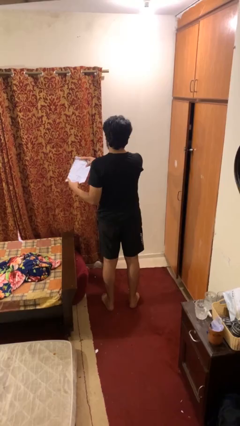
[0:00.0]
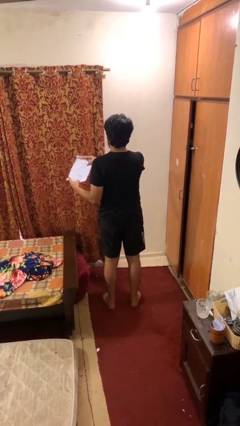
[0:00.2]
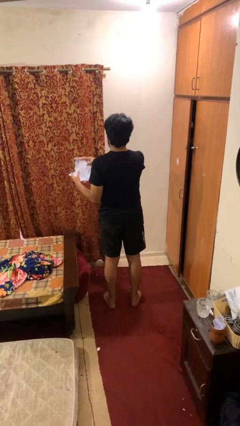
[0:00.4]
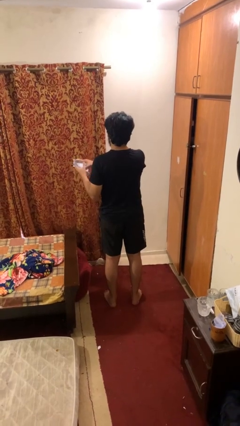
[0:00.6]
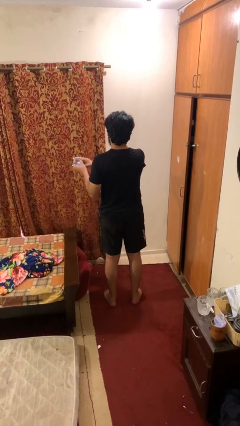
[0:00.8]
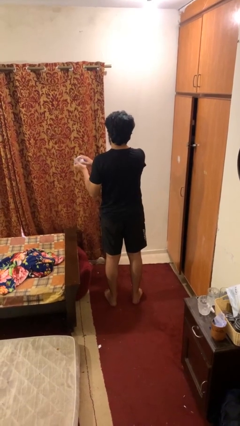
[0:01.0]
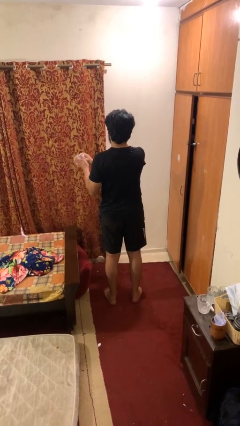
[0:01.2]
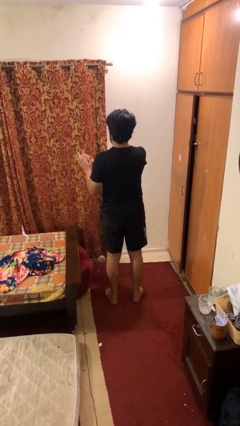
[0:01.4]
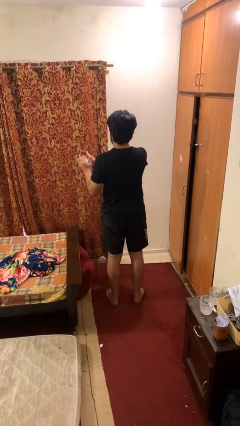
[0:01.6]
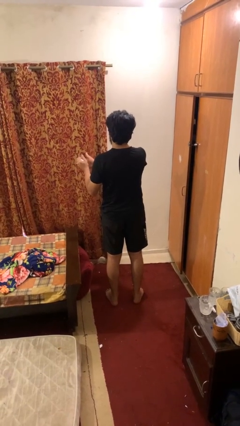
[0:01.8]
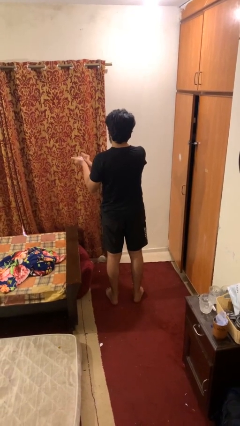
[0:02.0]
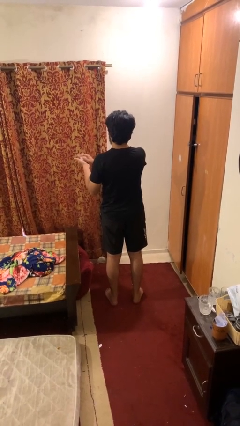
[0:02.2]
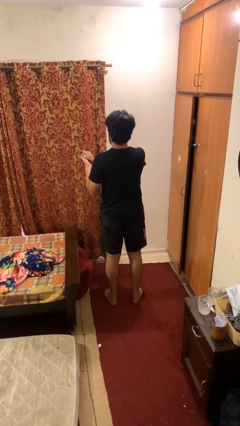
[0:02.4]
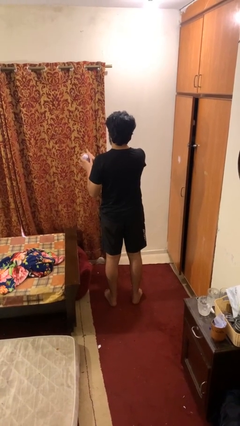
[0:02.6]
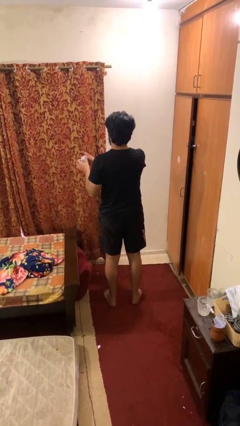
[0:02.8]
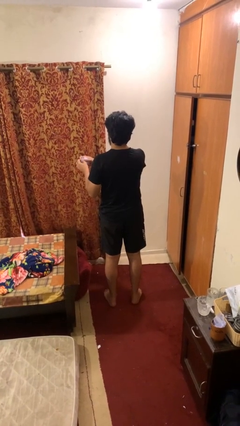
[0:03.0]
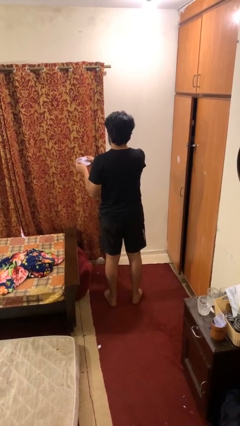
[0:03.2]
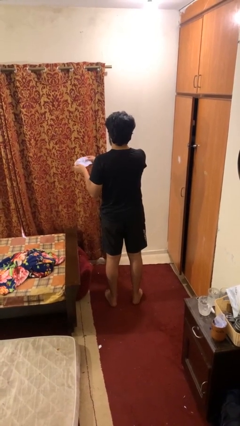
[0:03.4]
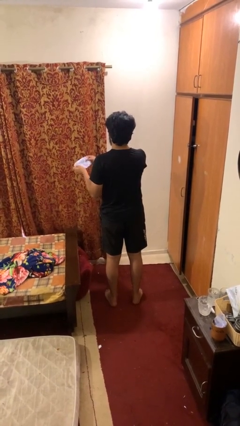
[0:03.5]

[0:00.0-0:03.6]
person crumples paper

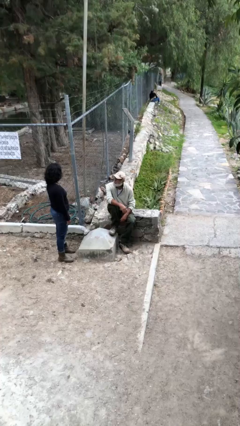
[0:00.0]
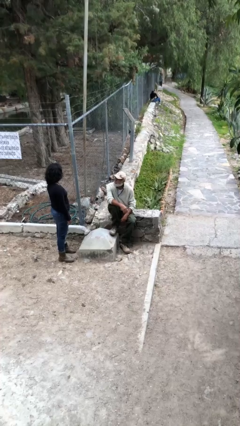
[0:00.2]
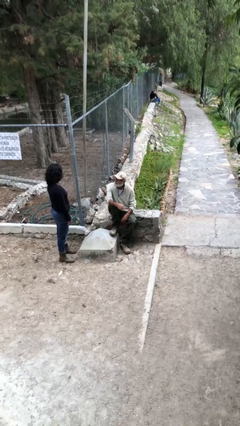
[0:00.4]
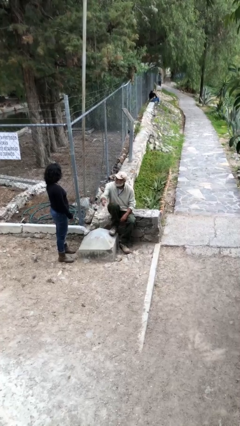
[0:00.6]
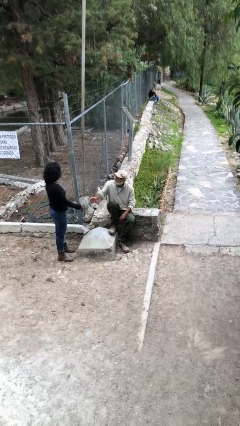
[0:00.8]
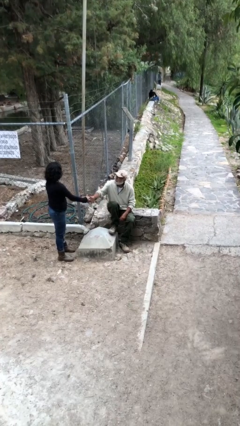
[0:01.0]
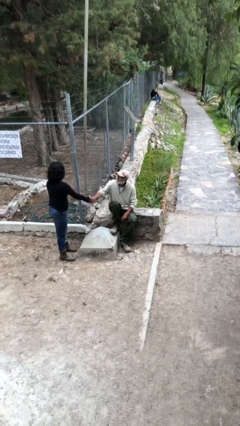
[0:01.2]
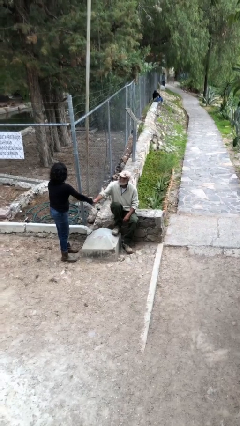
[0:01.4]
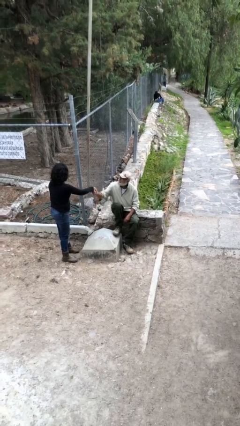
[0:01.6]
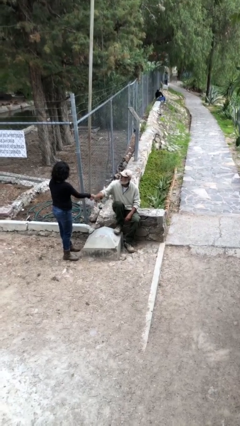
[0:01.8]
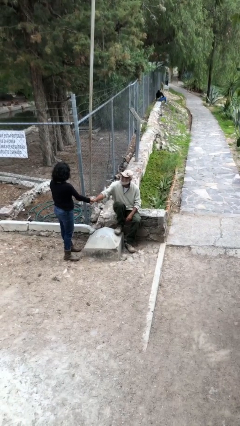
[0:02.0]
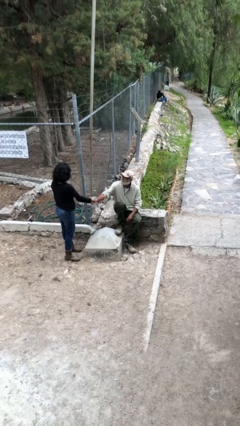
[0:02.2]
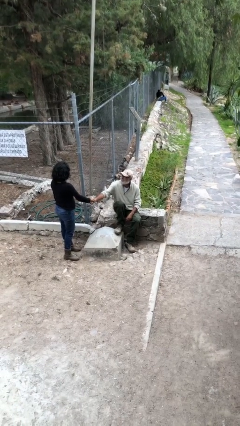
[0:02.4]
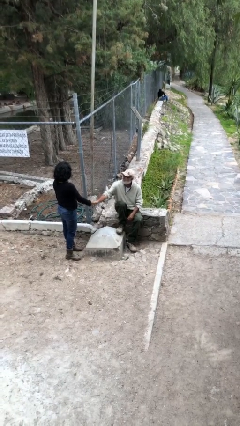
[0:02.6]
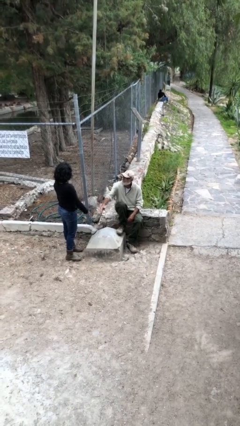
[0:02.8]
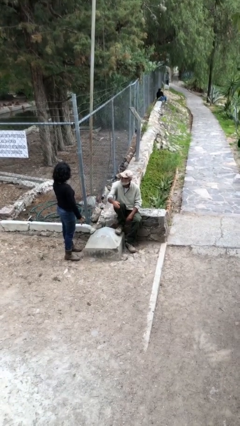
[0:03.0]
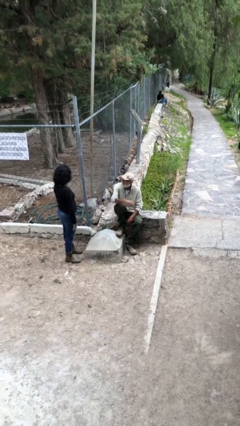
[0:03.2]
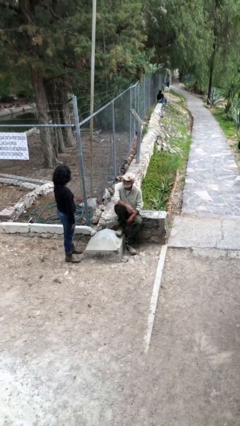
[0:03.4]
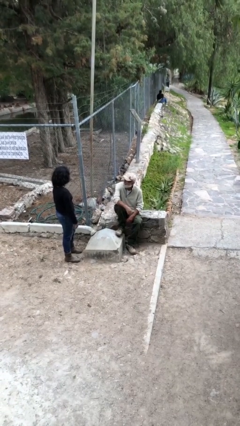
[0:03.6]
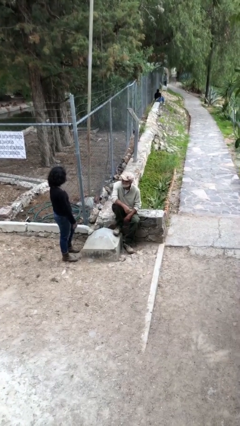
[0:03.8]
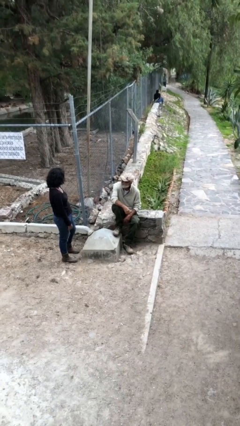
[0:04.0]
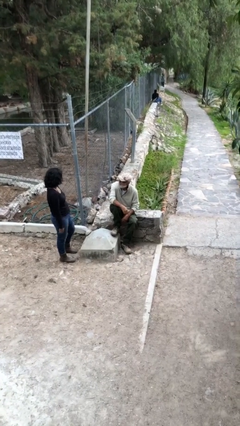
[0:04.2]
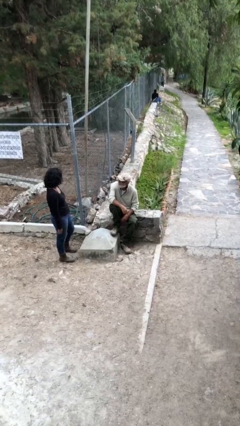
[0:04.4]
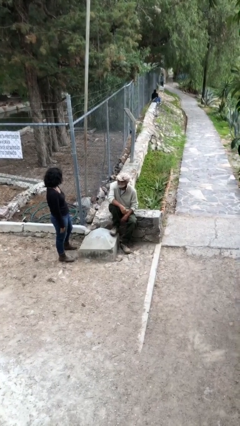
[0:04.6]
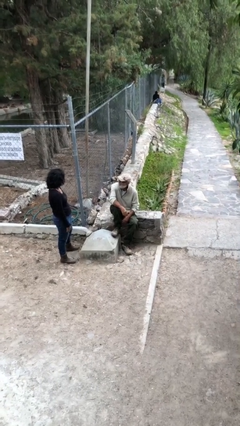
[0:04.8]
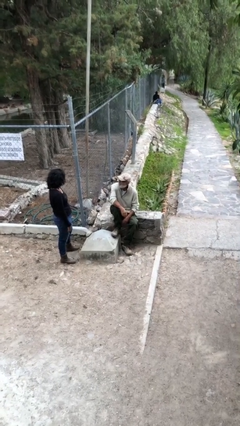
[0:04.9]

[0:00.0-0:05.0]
person shakes hand

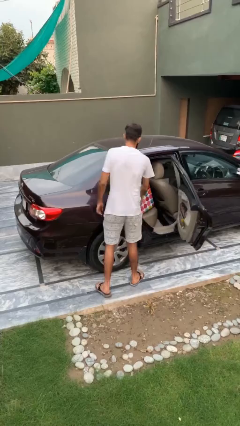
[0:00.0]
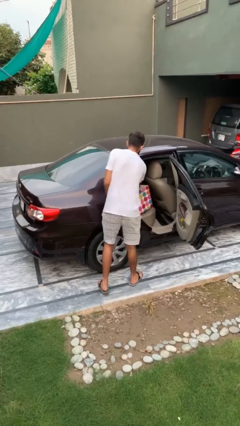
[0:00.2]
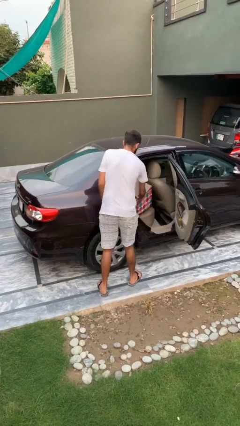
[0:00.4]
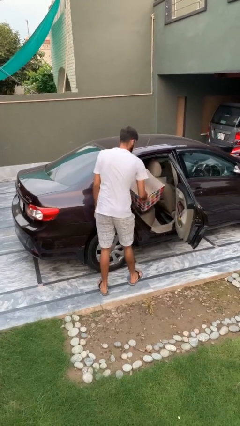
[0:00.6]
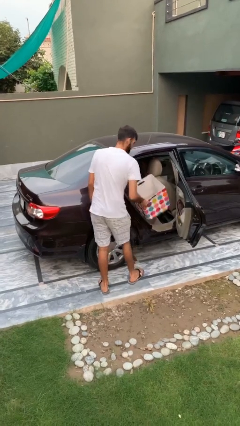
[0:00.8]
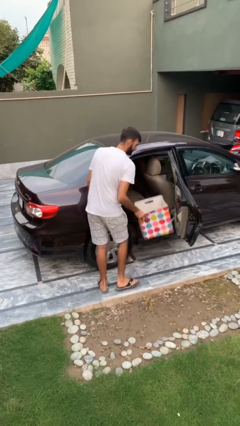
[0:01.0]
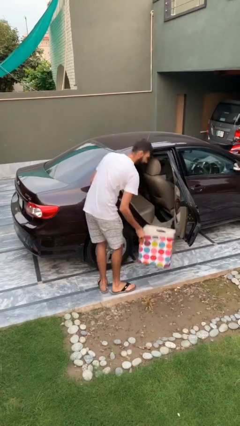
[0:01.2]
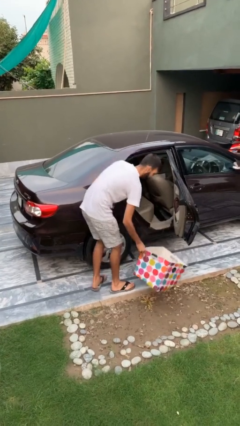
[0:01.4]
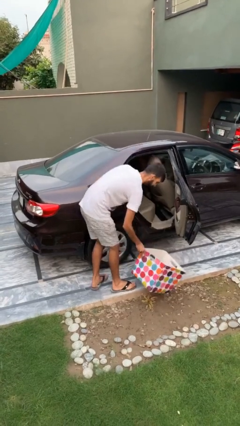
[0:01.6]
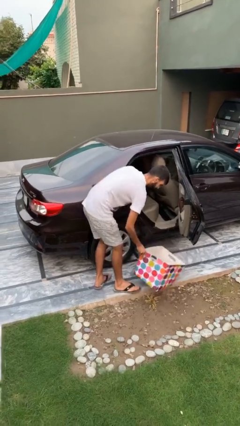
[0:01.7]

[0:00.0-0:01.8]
person unloads car

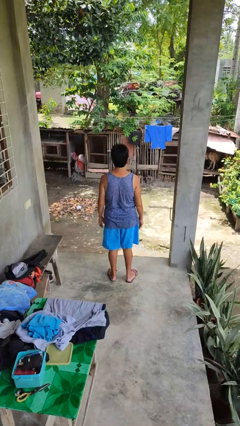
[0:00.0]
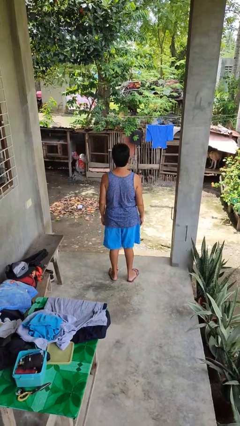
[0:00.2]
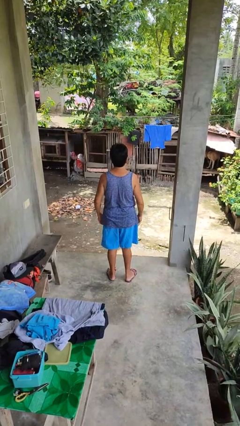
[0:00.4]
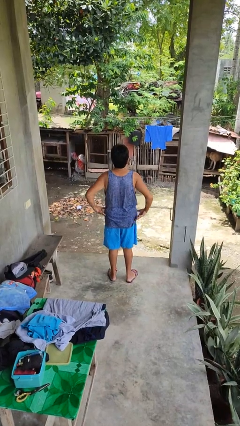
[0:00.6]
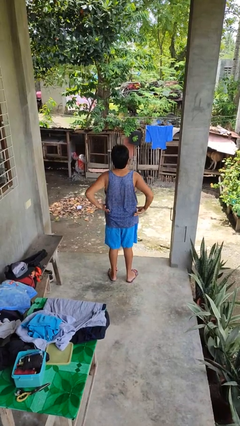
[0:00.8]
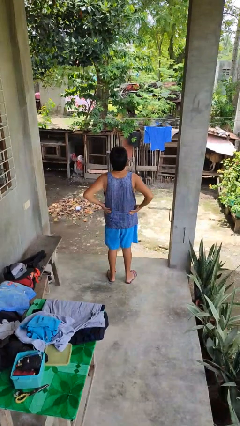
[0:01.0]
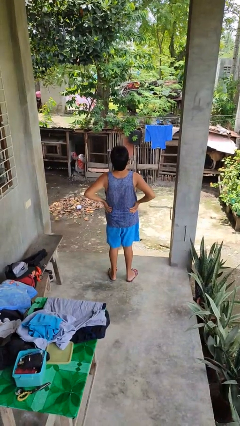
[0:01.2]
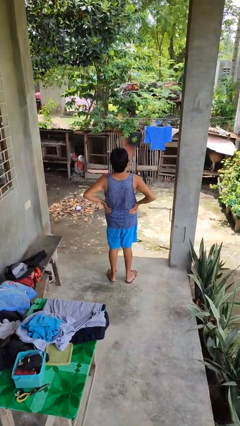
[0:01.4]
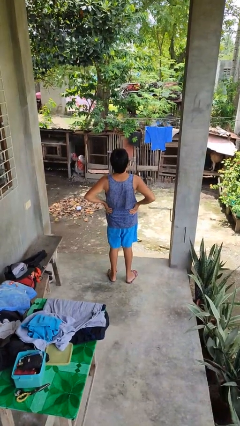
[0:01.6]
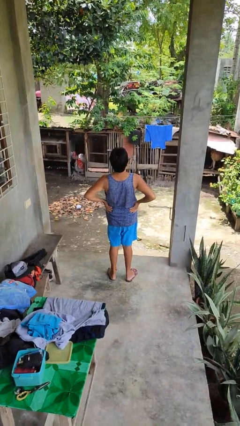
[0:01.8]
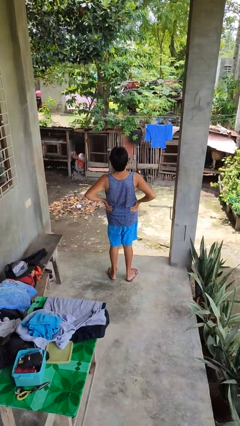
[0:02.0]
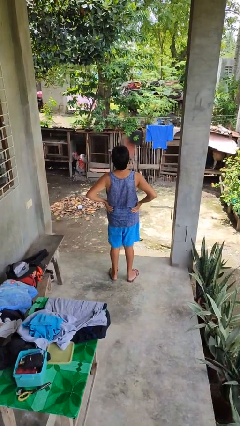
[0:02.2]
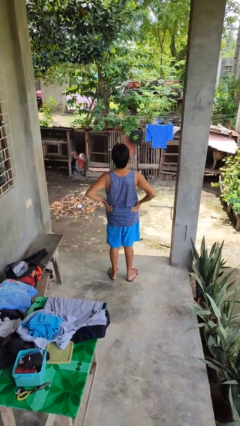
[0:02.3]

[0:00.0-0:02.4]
person stretches back

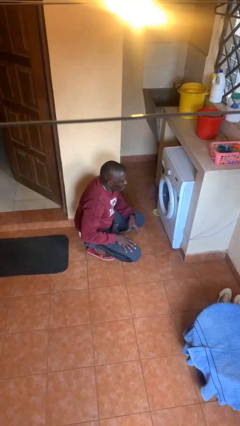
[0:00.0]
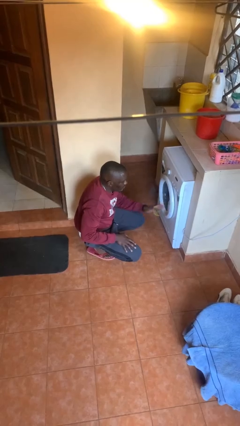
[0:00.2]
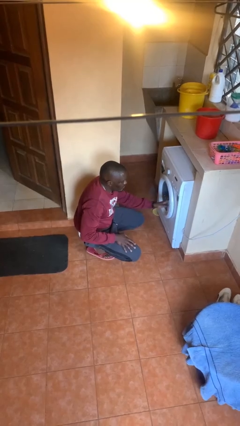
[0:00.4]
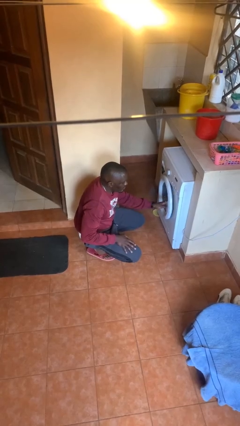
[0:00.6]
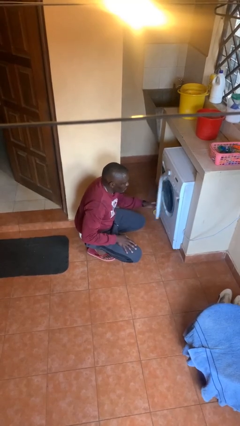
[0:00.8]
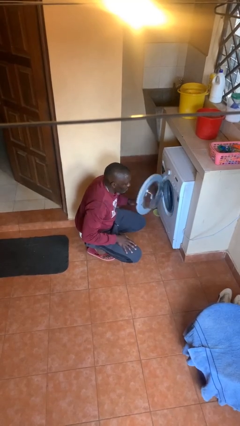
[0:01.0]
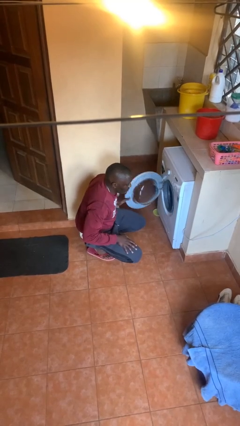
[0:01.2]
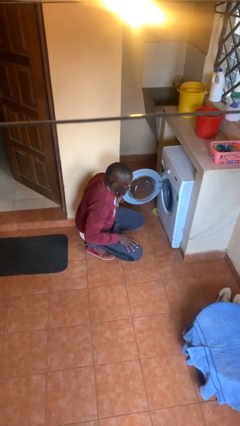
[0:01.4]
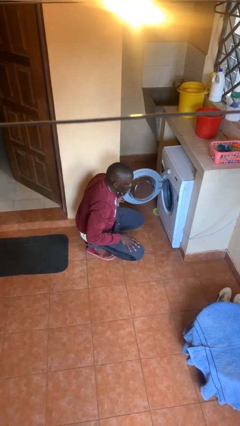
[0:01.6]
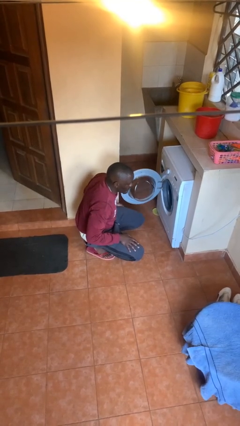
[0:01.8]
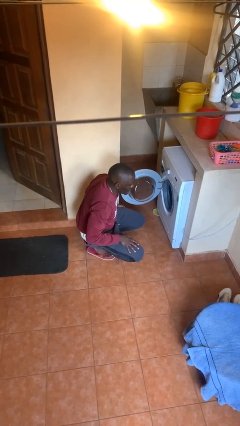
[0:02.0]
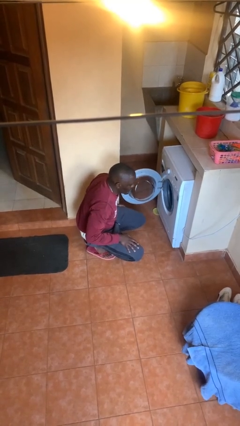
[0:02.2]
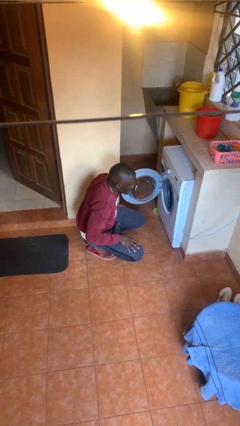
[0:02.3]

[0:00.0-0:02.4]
person opens clothes washer

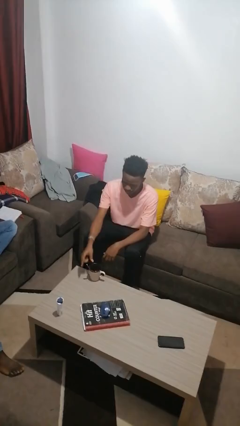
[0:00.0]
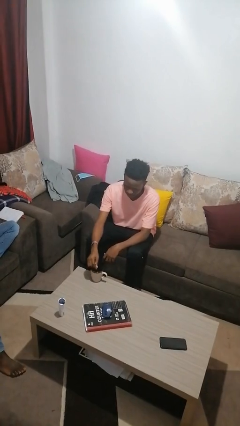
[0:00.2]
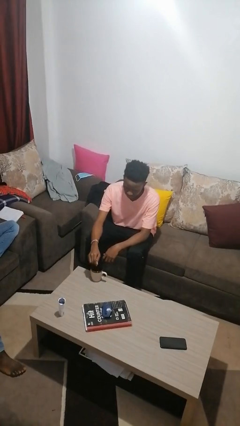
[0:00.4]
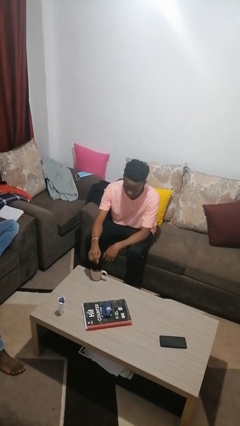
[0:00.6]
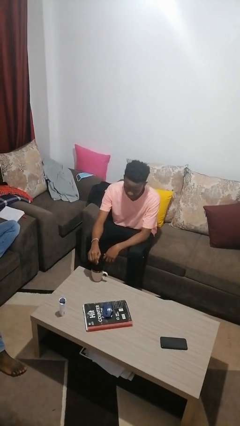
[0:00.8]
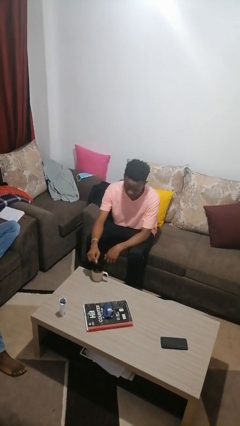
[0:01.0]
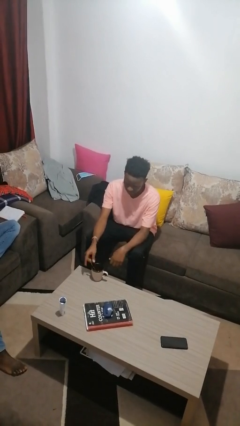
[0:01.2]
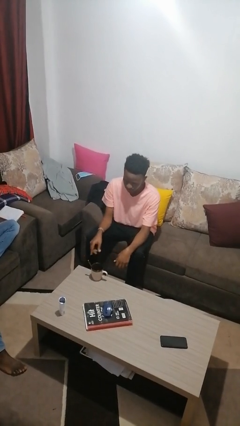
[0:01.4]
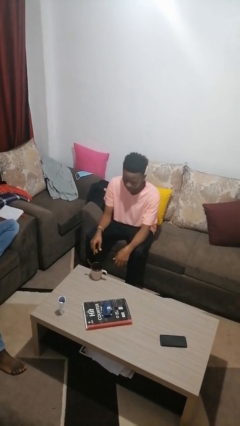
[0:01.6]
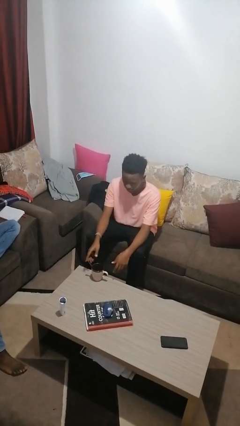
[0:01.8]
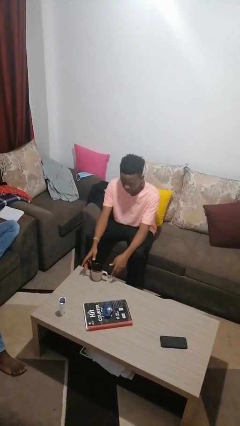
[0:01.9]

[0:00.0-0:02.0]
person stirs mug
